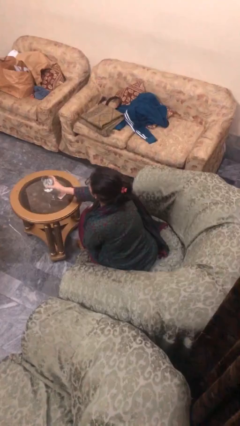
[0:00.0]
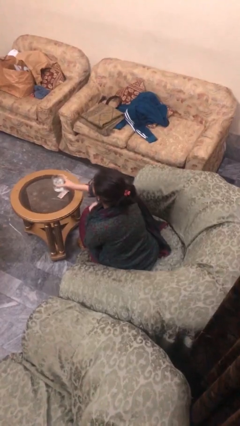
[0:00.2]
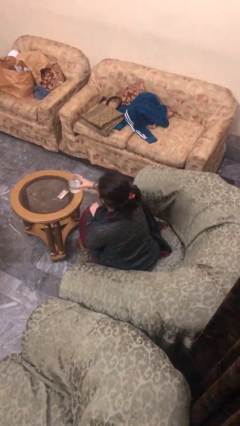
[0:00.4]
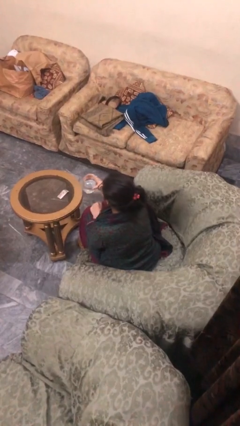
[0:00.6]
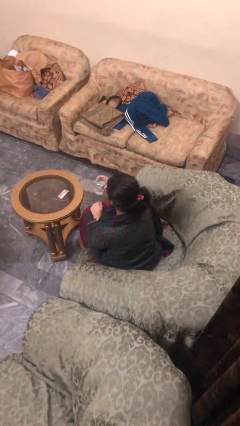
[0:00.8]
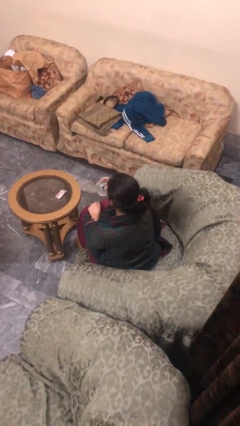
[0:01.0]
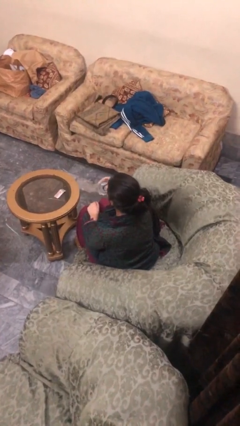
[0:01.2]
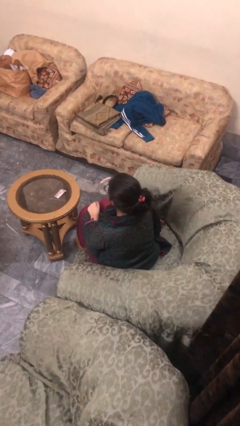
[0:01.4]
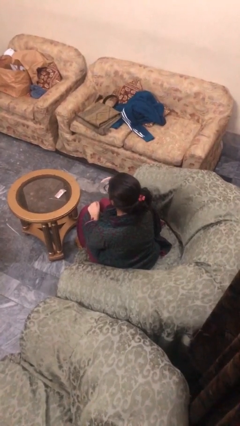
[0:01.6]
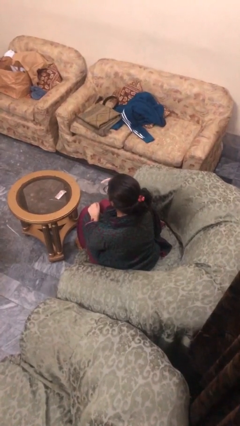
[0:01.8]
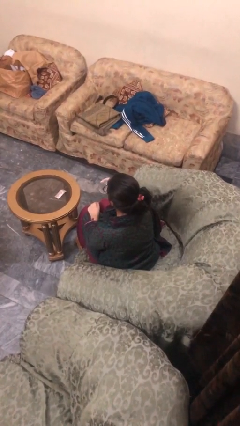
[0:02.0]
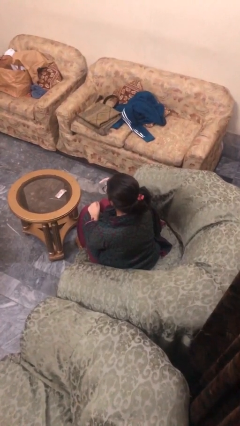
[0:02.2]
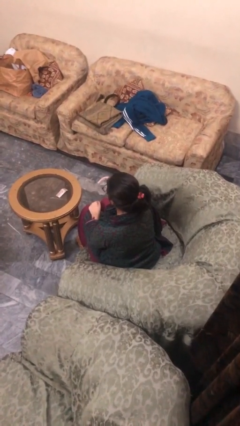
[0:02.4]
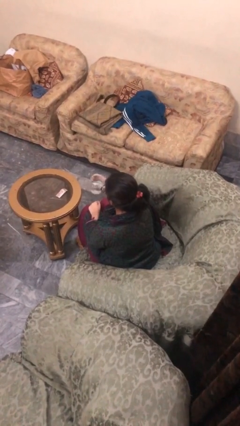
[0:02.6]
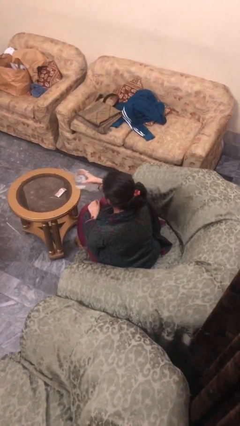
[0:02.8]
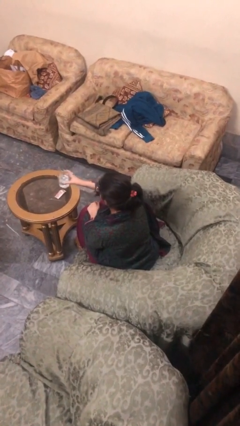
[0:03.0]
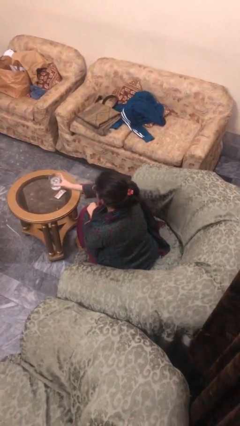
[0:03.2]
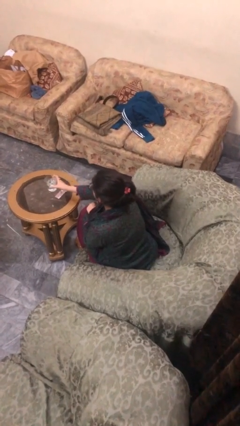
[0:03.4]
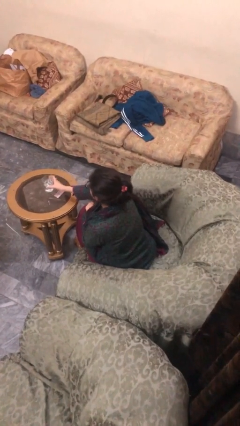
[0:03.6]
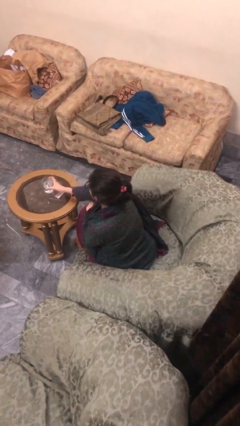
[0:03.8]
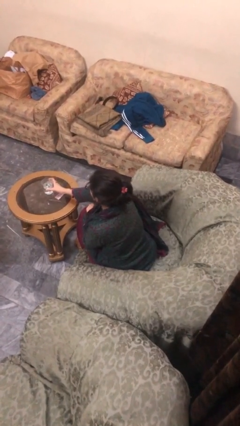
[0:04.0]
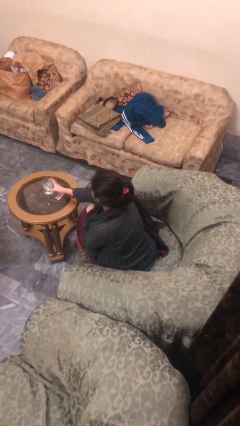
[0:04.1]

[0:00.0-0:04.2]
person drinks from cup

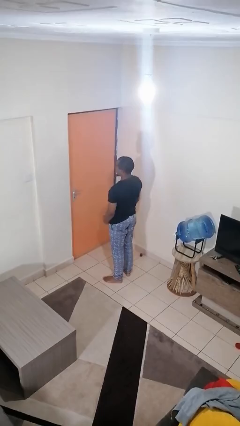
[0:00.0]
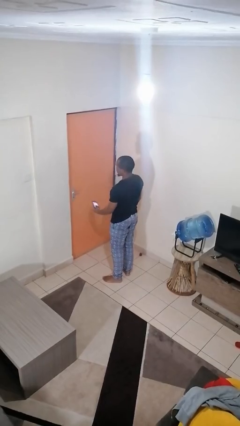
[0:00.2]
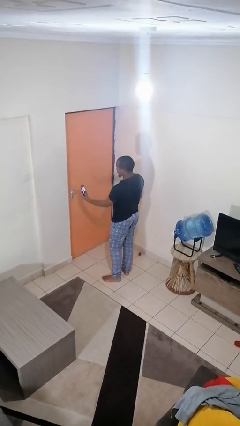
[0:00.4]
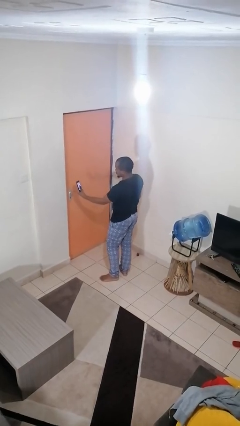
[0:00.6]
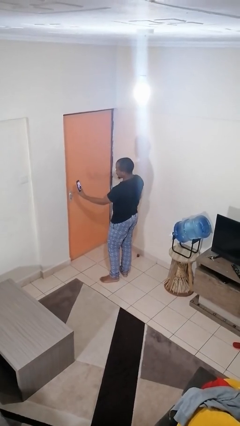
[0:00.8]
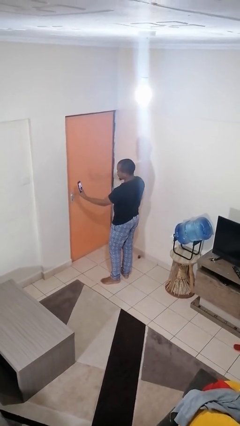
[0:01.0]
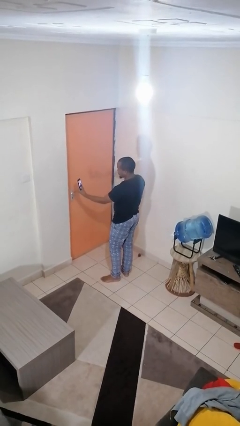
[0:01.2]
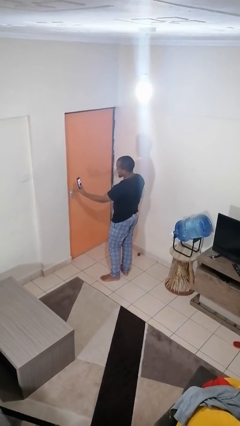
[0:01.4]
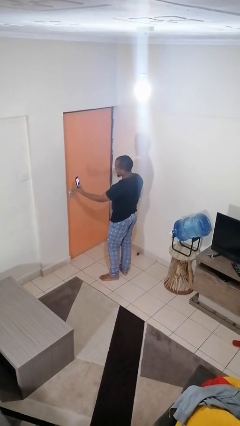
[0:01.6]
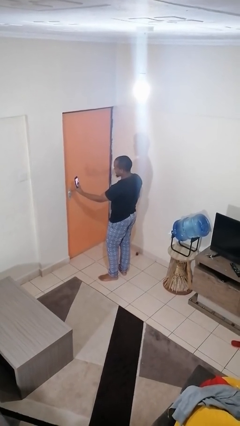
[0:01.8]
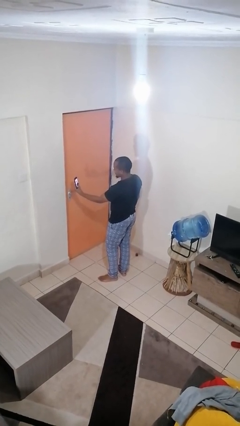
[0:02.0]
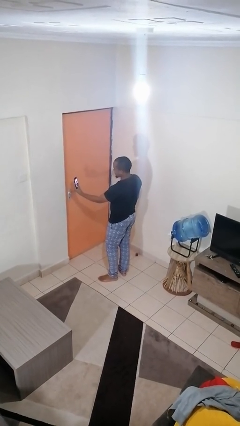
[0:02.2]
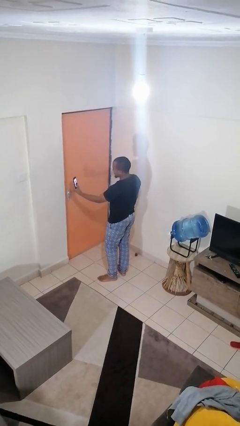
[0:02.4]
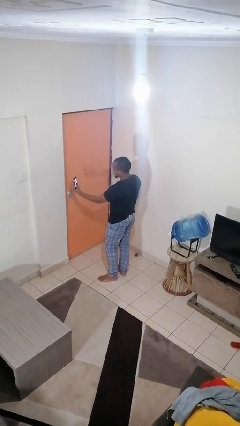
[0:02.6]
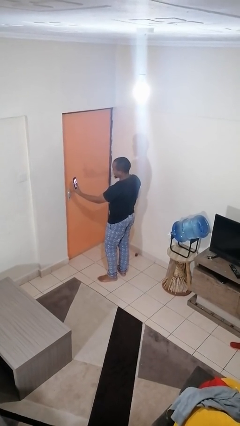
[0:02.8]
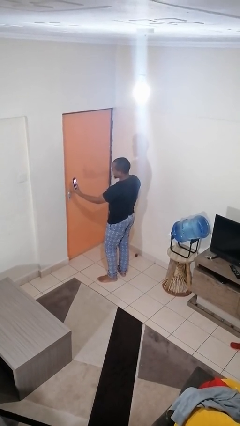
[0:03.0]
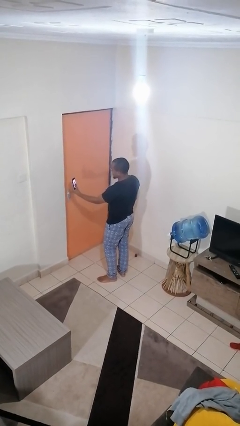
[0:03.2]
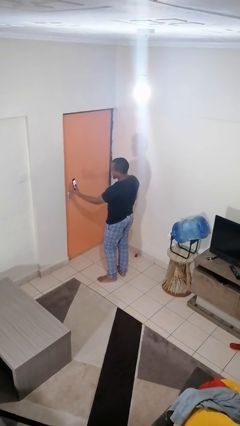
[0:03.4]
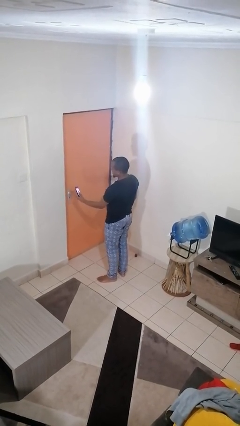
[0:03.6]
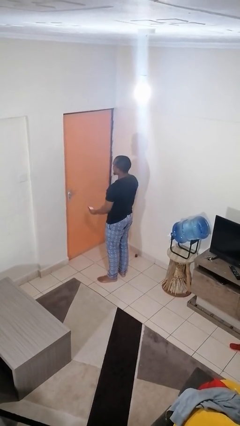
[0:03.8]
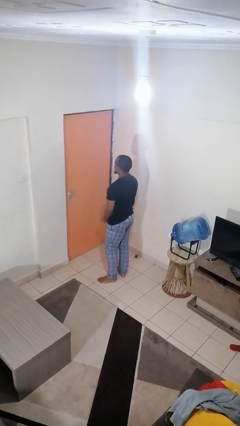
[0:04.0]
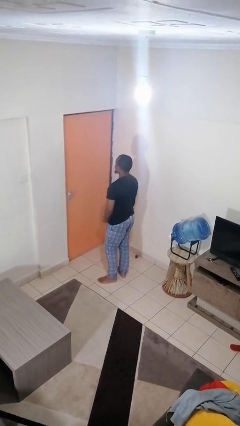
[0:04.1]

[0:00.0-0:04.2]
person takes selfie

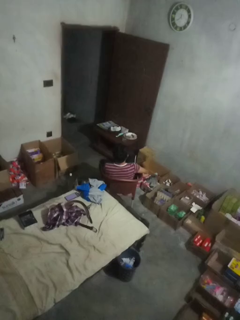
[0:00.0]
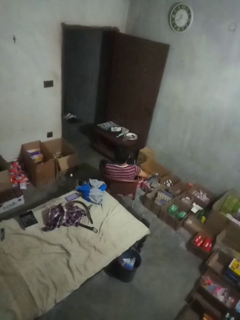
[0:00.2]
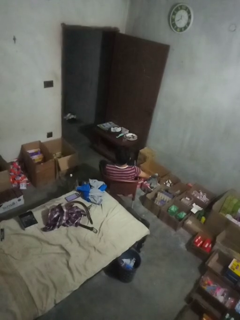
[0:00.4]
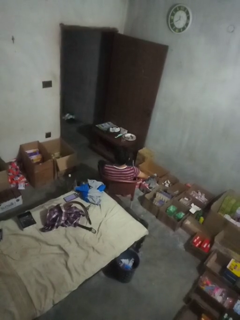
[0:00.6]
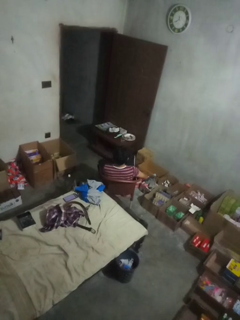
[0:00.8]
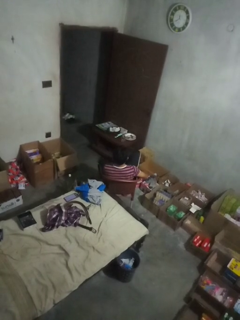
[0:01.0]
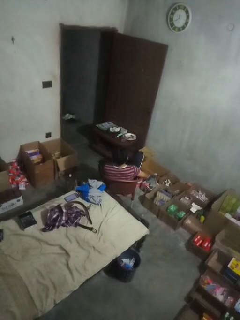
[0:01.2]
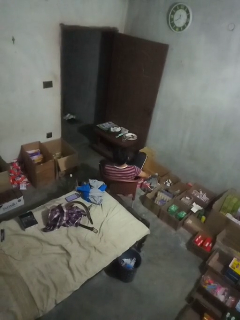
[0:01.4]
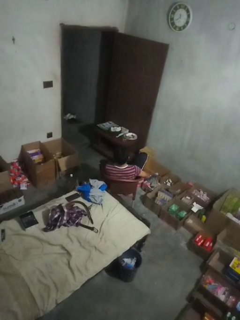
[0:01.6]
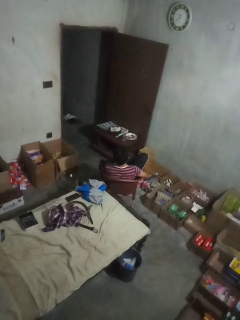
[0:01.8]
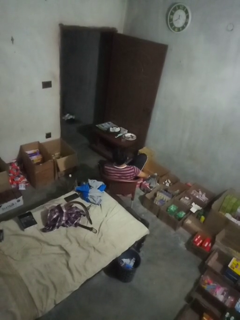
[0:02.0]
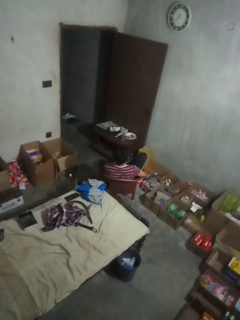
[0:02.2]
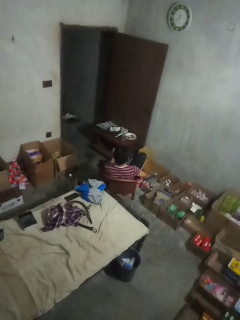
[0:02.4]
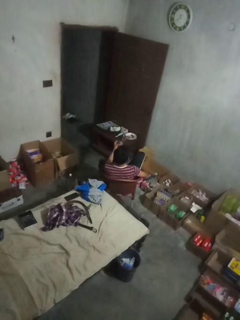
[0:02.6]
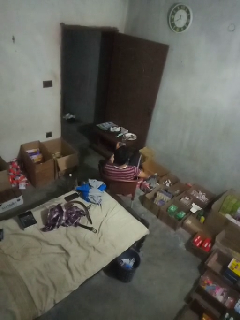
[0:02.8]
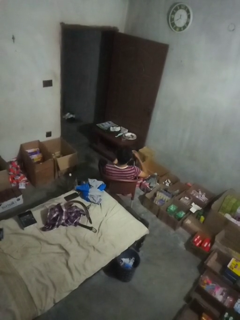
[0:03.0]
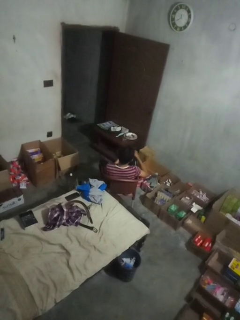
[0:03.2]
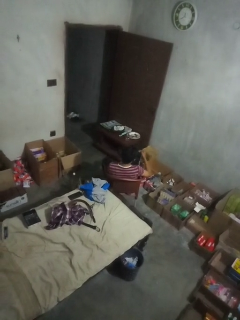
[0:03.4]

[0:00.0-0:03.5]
person takes off socks

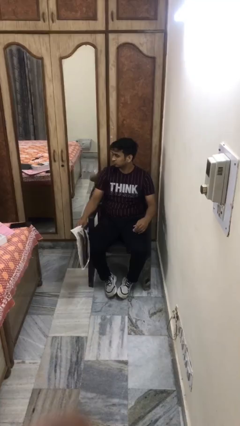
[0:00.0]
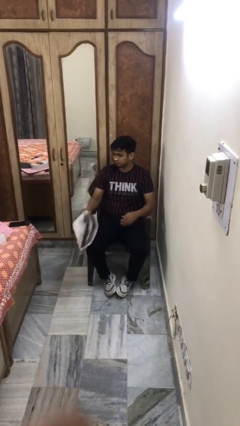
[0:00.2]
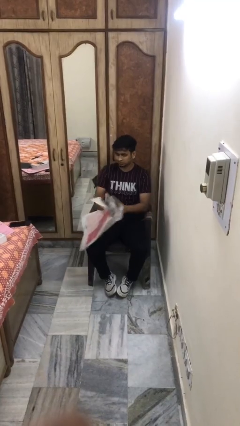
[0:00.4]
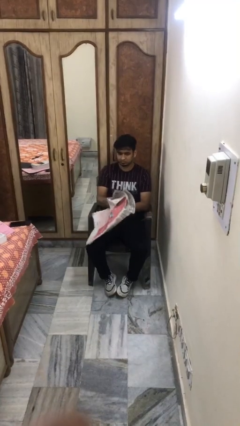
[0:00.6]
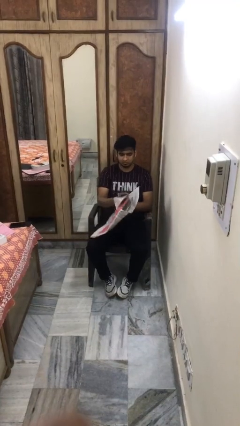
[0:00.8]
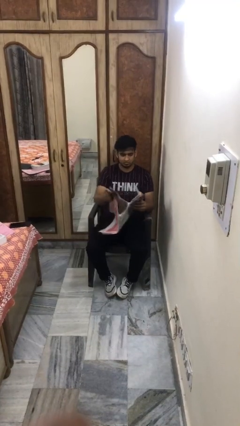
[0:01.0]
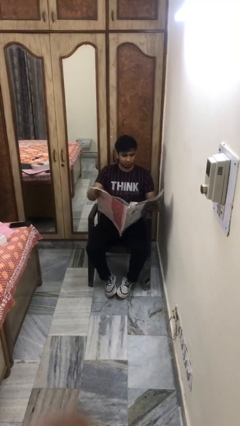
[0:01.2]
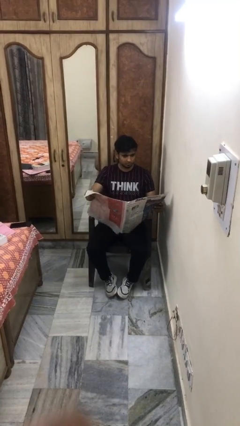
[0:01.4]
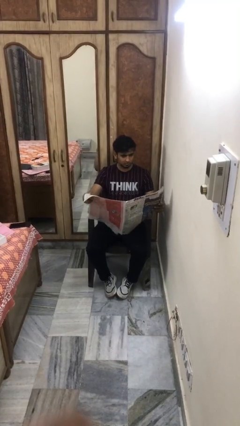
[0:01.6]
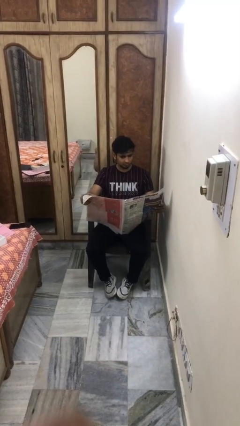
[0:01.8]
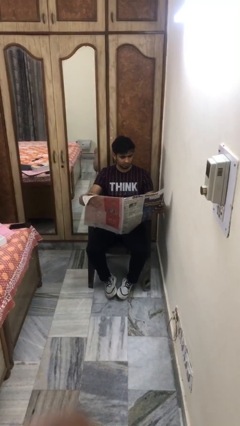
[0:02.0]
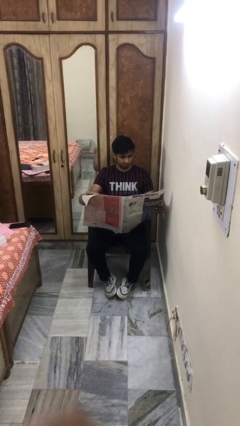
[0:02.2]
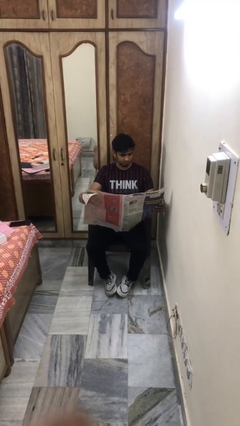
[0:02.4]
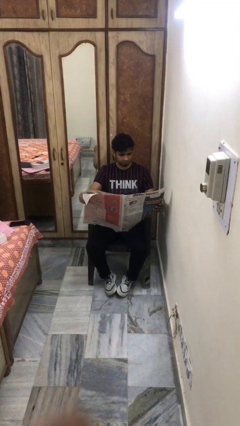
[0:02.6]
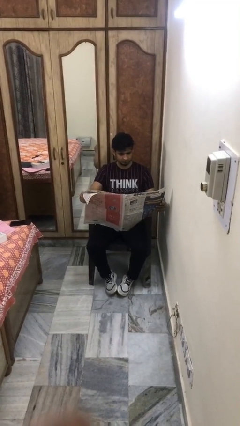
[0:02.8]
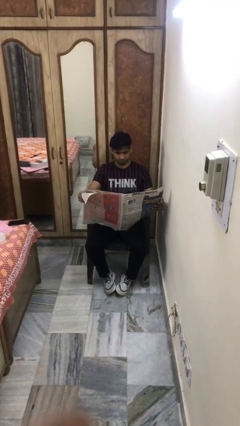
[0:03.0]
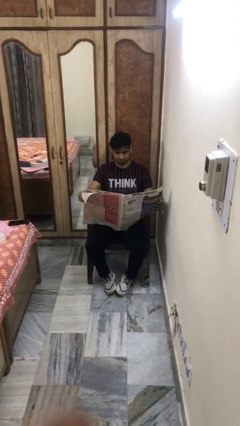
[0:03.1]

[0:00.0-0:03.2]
person reads newspaper

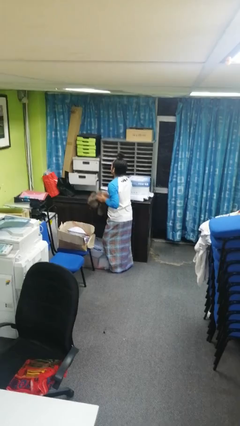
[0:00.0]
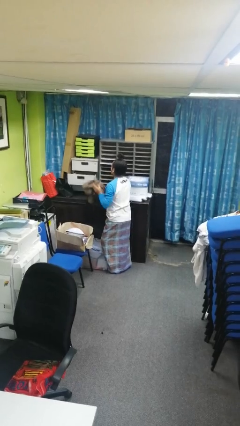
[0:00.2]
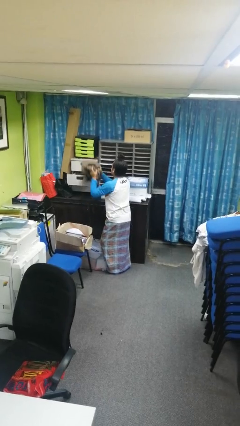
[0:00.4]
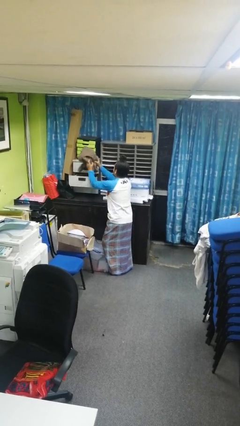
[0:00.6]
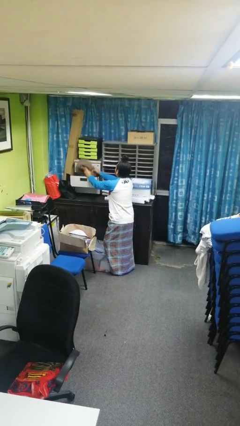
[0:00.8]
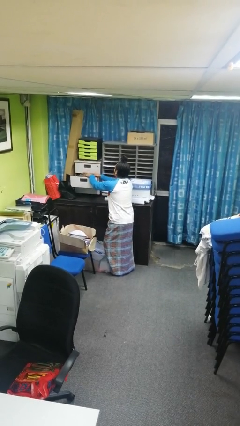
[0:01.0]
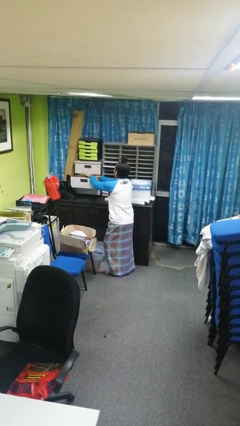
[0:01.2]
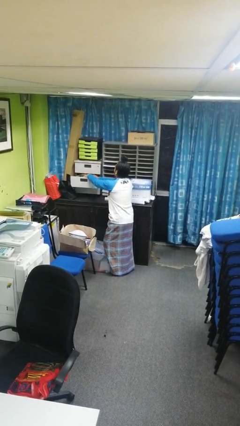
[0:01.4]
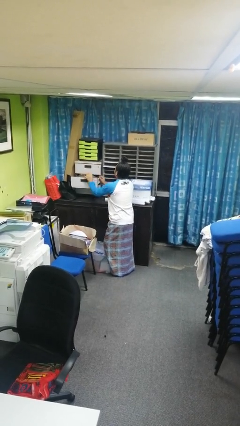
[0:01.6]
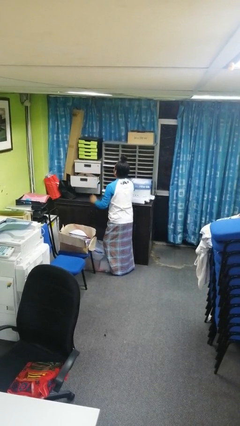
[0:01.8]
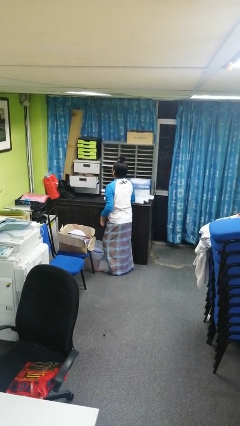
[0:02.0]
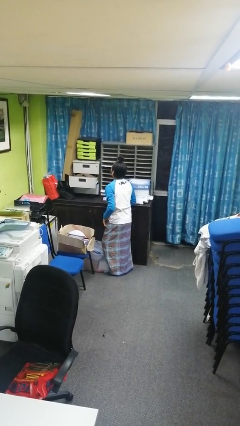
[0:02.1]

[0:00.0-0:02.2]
person puts clothes into dresser

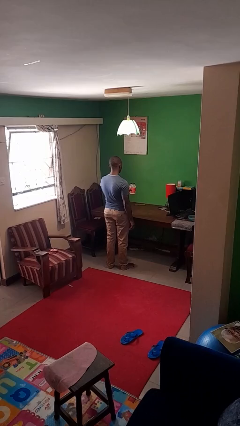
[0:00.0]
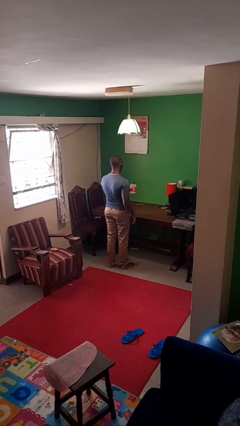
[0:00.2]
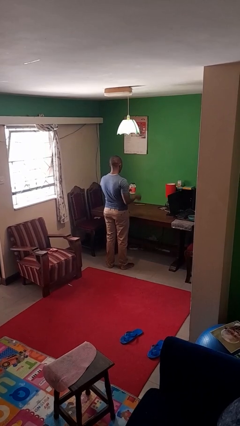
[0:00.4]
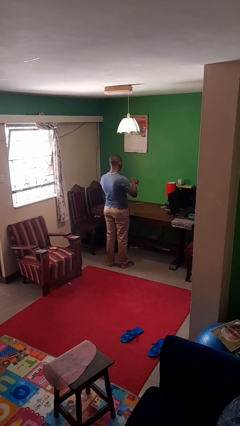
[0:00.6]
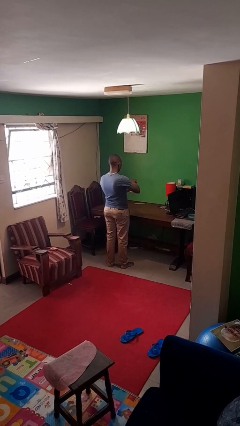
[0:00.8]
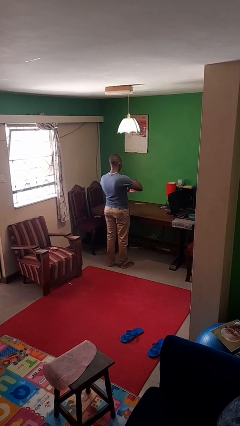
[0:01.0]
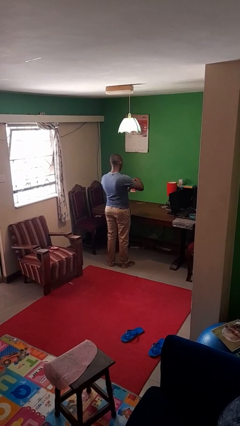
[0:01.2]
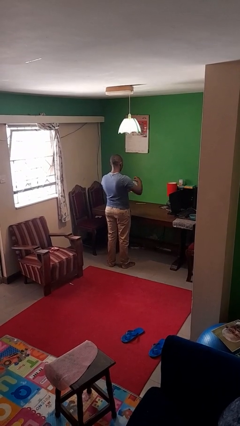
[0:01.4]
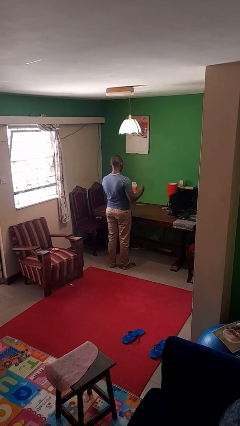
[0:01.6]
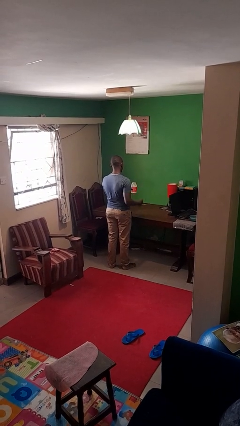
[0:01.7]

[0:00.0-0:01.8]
person opens jar
